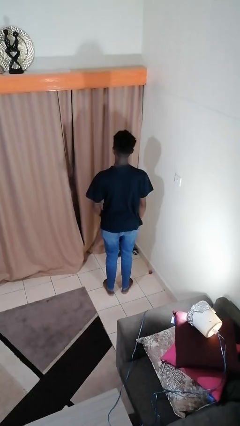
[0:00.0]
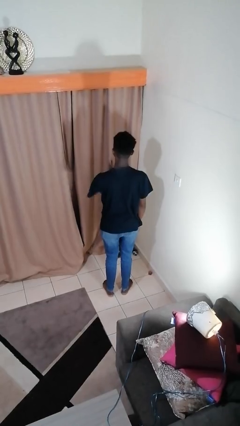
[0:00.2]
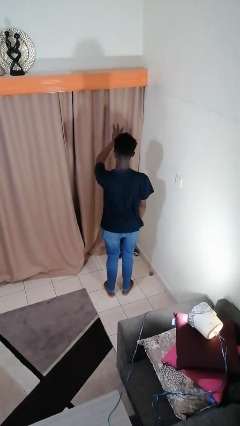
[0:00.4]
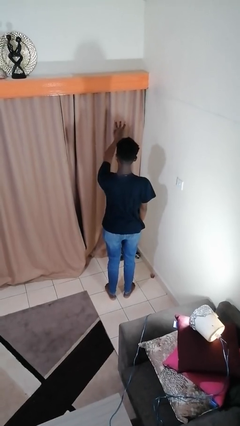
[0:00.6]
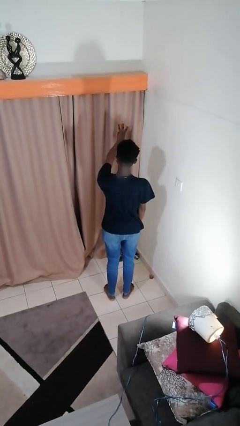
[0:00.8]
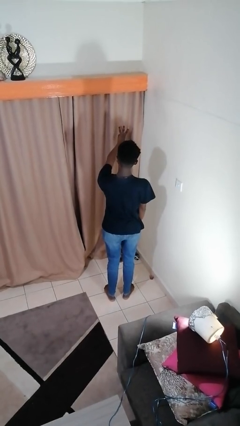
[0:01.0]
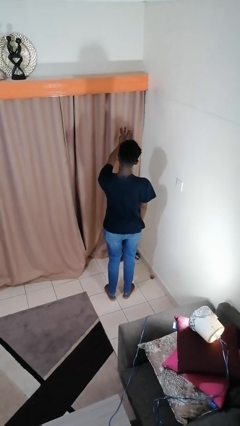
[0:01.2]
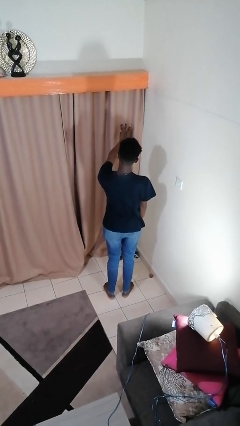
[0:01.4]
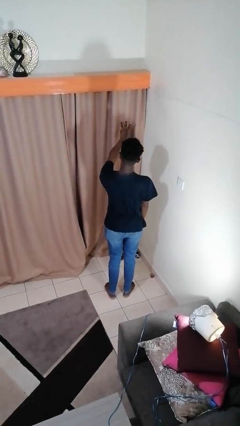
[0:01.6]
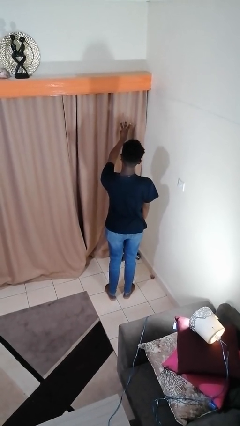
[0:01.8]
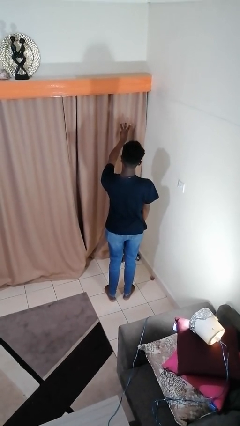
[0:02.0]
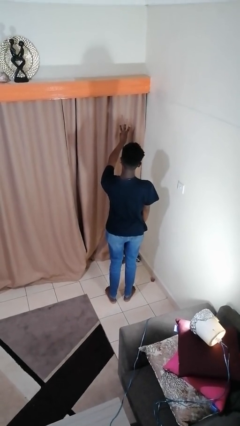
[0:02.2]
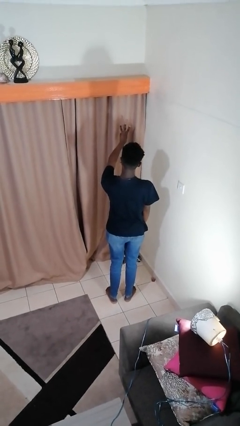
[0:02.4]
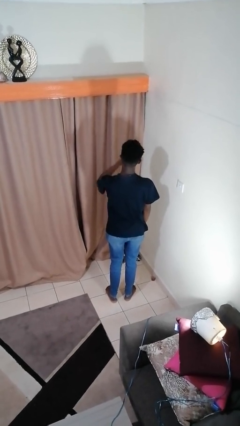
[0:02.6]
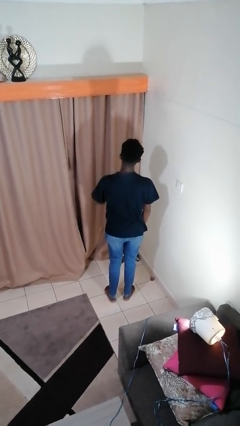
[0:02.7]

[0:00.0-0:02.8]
person gestures number three

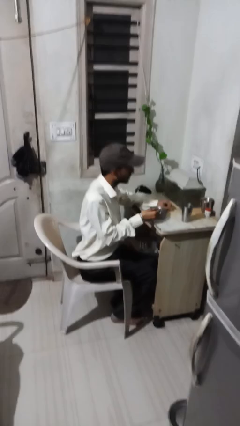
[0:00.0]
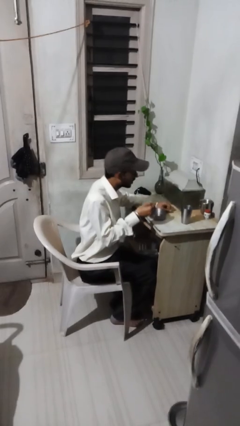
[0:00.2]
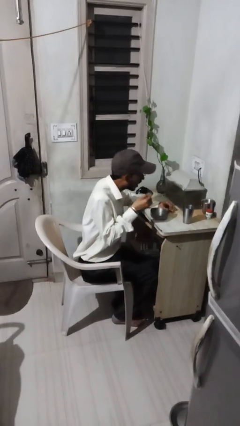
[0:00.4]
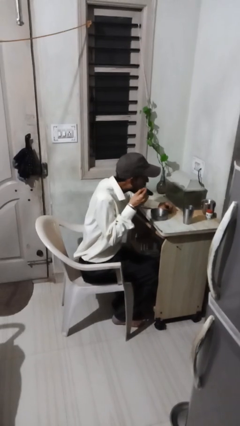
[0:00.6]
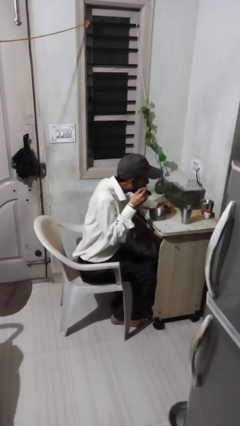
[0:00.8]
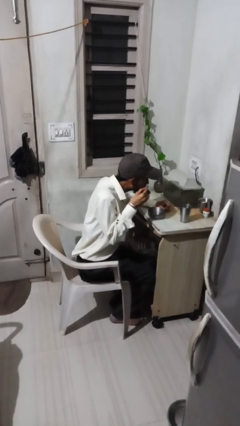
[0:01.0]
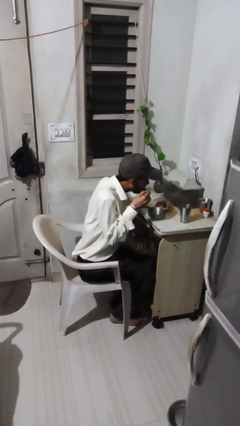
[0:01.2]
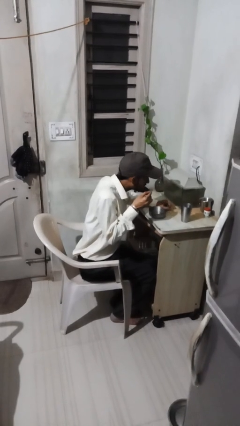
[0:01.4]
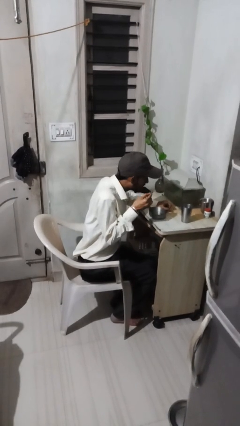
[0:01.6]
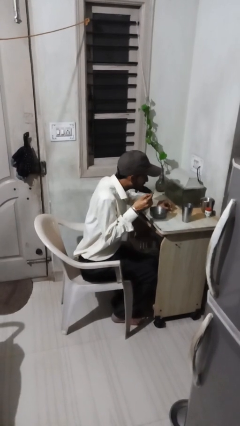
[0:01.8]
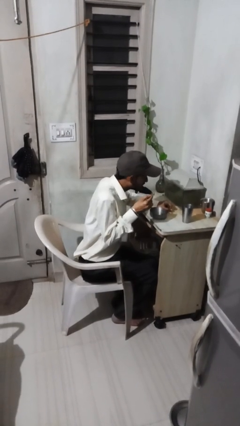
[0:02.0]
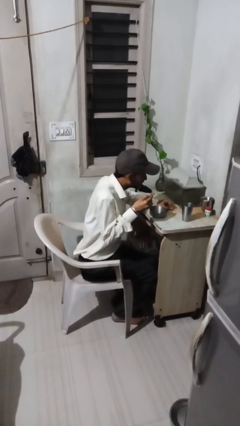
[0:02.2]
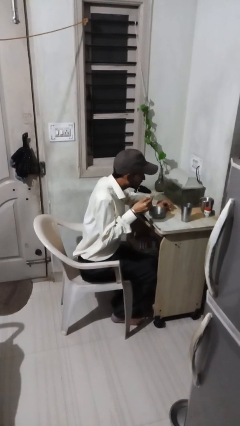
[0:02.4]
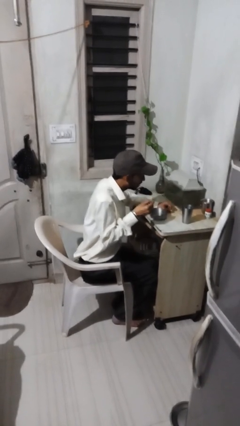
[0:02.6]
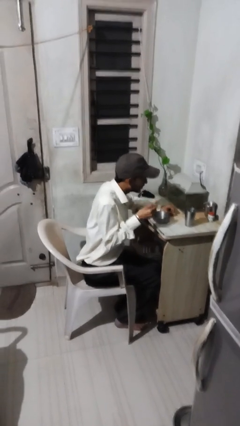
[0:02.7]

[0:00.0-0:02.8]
person eats with utensil

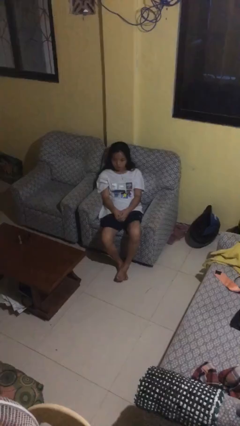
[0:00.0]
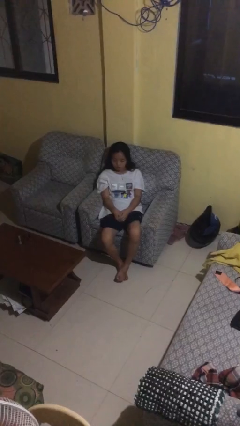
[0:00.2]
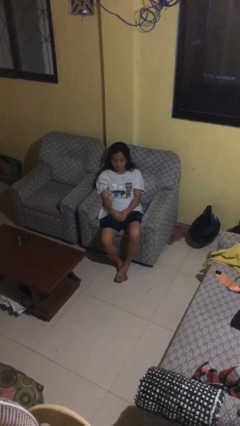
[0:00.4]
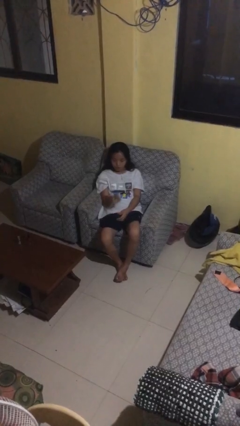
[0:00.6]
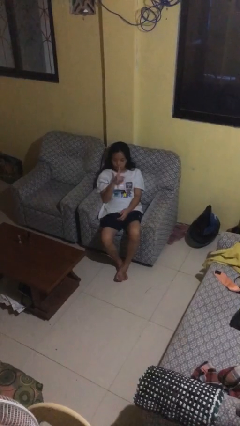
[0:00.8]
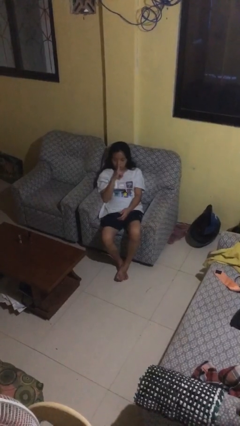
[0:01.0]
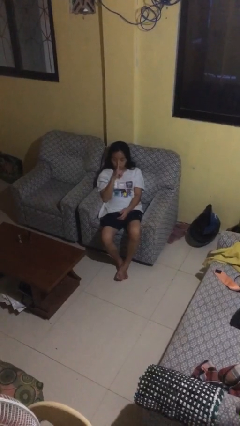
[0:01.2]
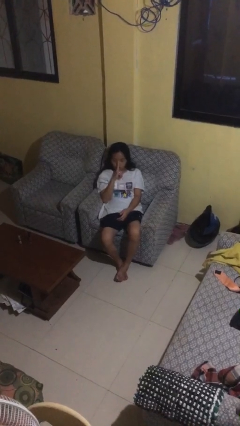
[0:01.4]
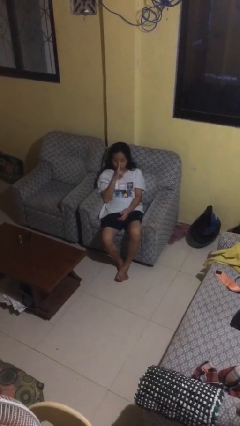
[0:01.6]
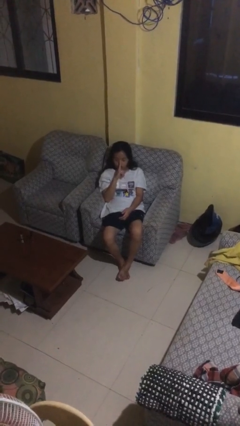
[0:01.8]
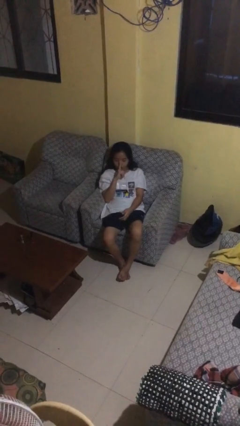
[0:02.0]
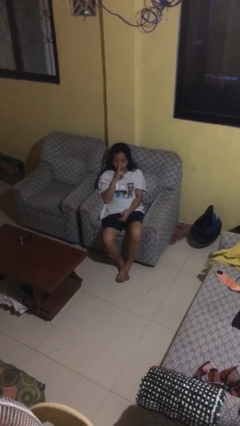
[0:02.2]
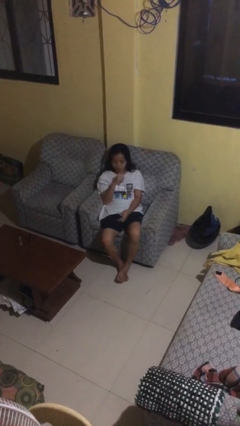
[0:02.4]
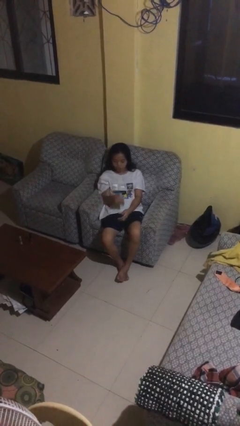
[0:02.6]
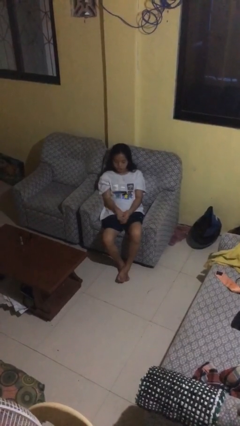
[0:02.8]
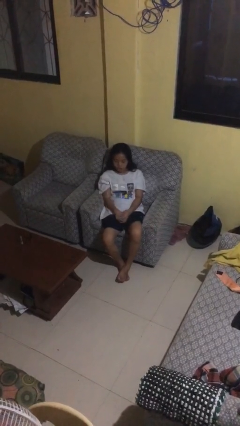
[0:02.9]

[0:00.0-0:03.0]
person gestures be quiet

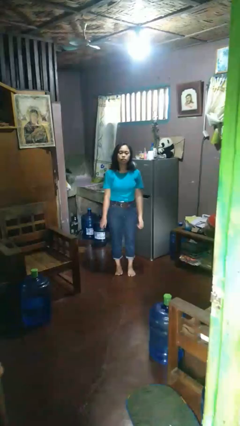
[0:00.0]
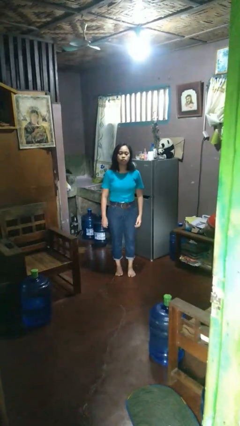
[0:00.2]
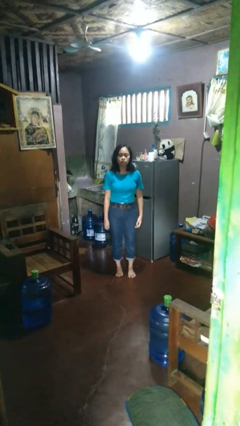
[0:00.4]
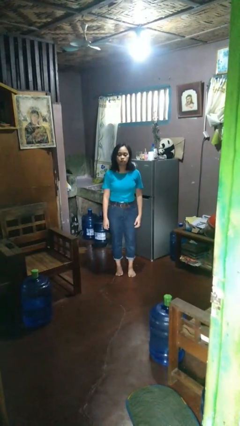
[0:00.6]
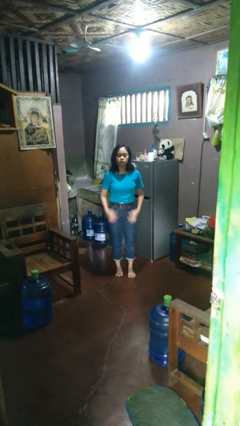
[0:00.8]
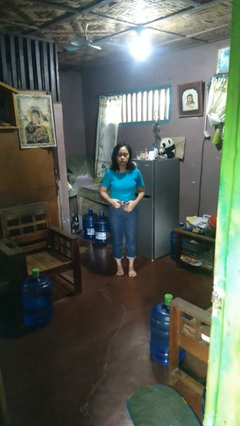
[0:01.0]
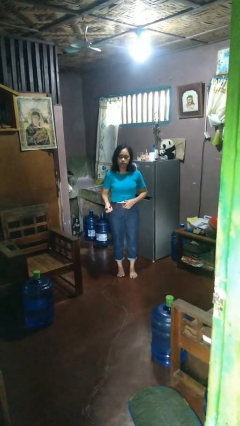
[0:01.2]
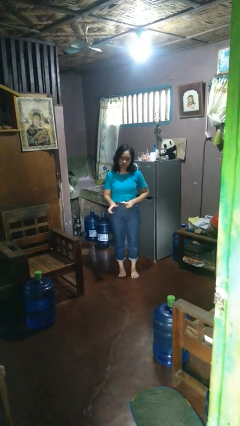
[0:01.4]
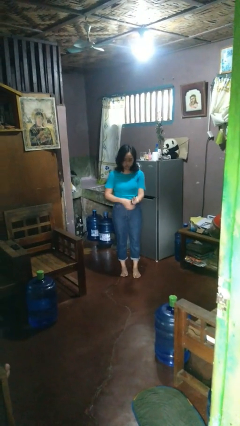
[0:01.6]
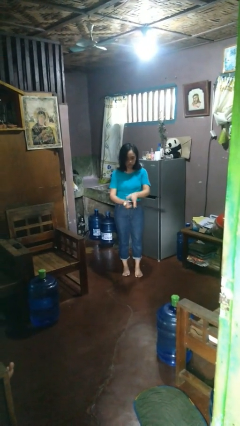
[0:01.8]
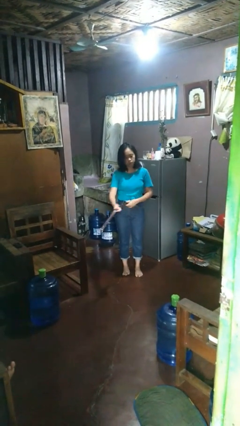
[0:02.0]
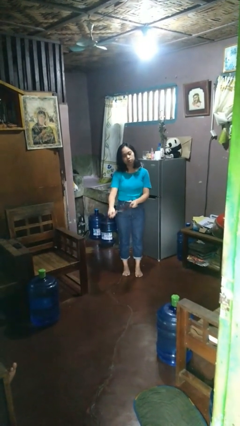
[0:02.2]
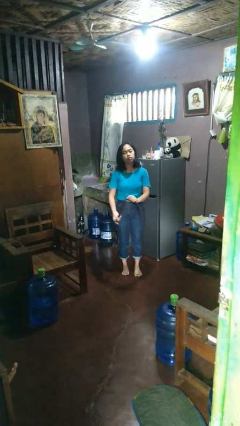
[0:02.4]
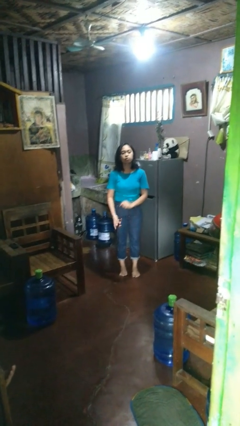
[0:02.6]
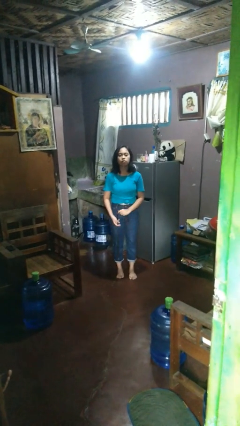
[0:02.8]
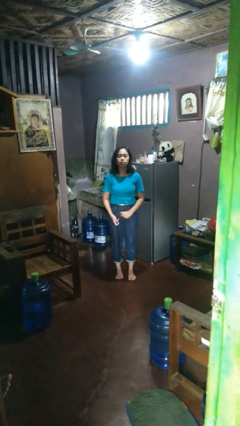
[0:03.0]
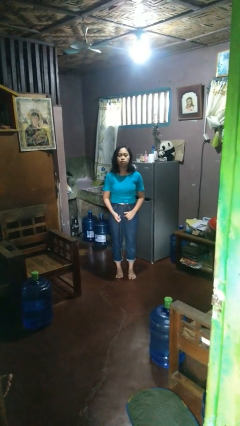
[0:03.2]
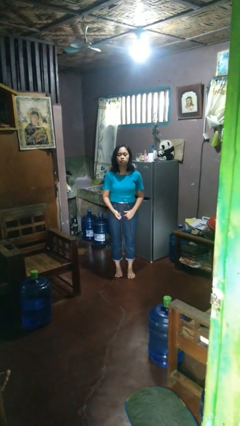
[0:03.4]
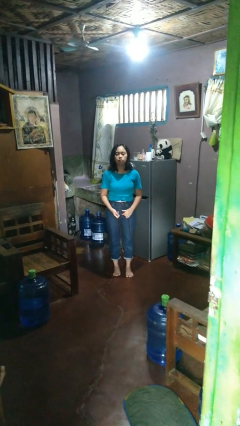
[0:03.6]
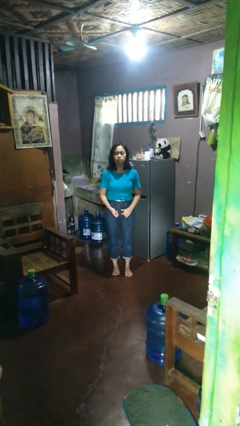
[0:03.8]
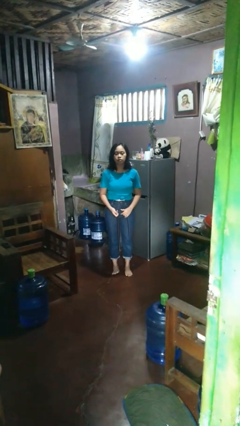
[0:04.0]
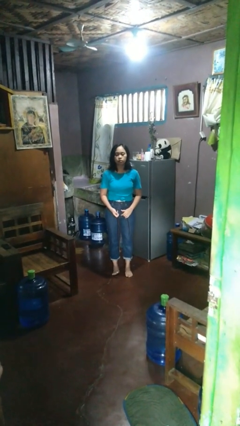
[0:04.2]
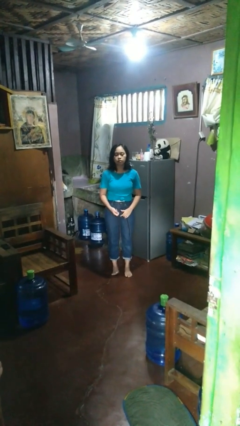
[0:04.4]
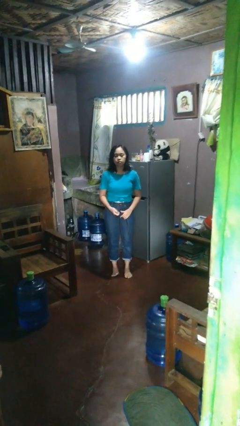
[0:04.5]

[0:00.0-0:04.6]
person takes off belt

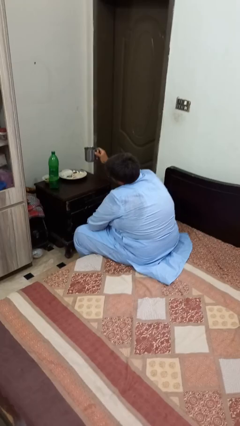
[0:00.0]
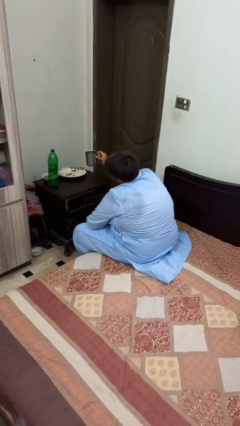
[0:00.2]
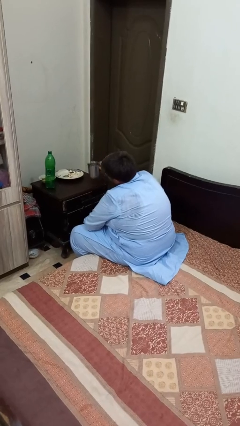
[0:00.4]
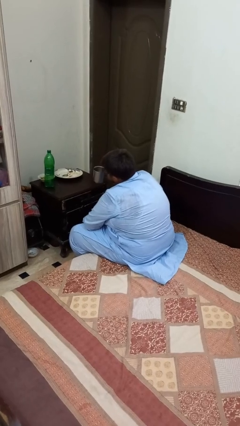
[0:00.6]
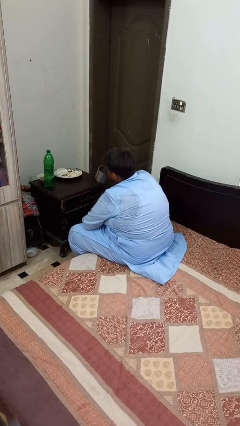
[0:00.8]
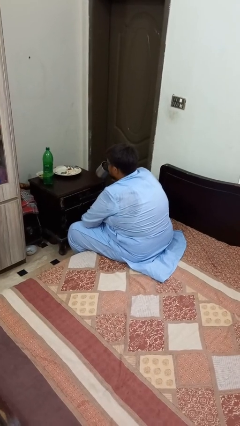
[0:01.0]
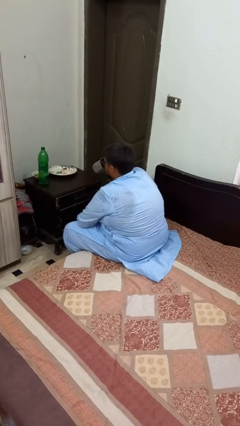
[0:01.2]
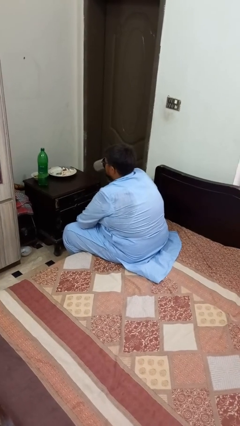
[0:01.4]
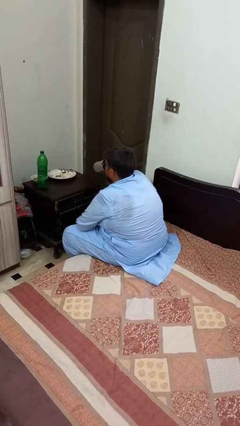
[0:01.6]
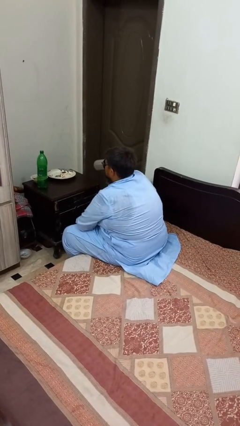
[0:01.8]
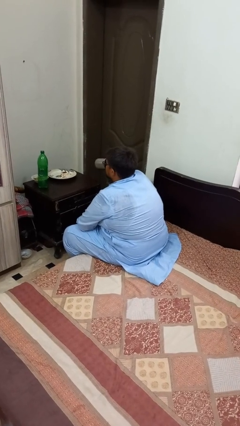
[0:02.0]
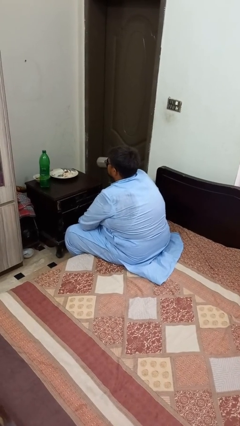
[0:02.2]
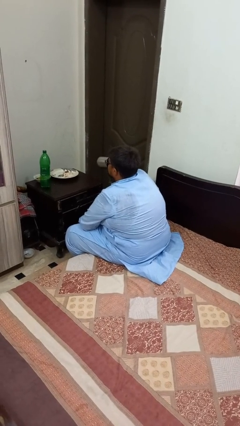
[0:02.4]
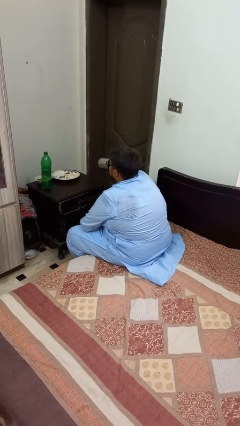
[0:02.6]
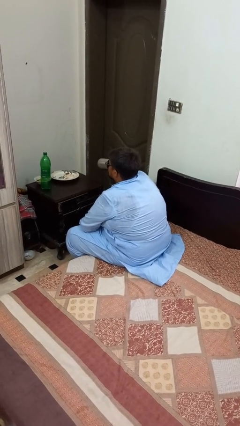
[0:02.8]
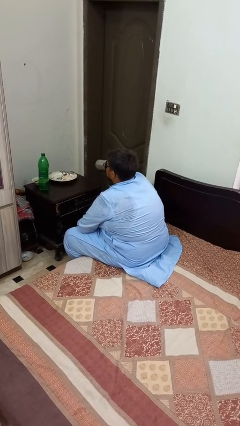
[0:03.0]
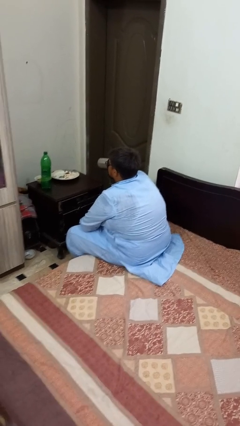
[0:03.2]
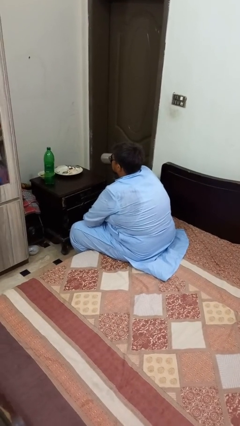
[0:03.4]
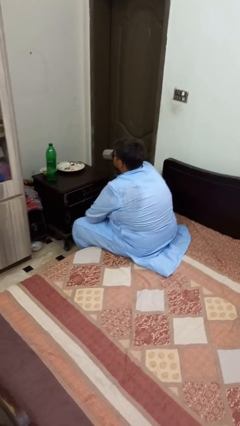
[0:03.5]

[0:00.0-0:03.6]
person drinks from shotglass

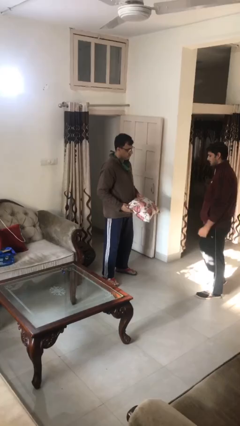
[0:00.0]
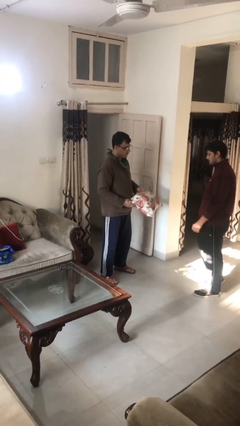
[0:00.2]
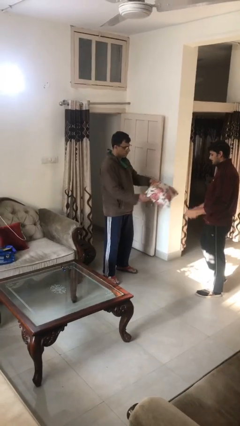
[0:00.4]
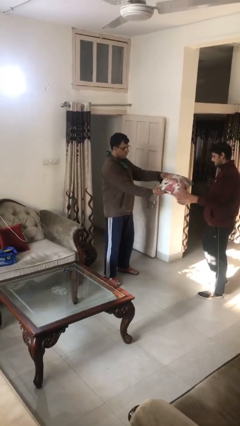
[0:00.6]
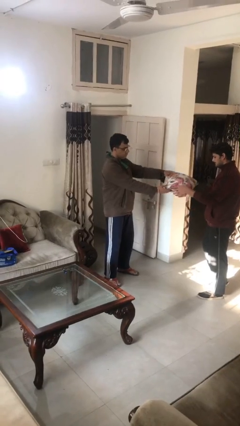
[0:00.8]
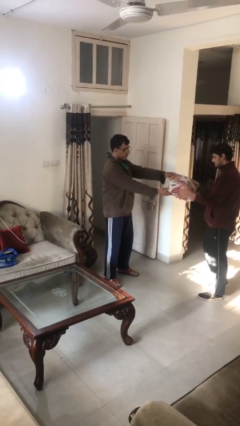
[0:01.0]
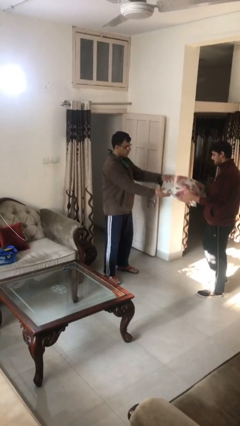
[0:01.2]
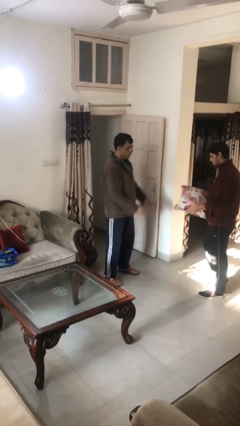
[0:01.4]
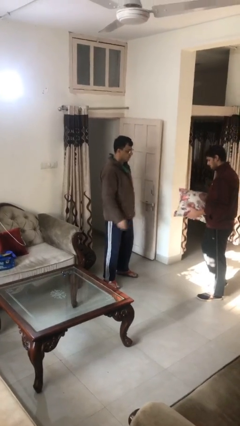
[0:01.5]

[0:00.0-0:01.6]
person transfers object to person
